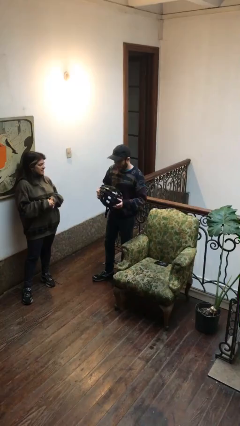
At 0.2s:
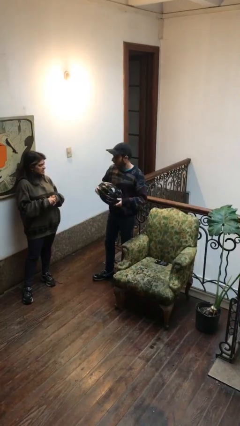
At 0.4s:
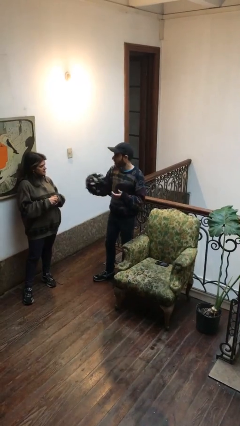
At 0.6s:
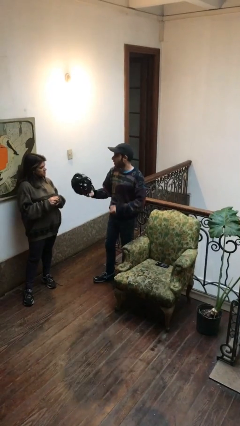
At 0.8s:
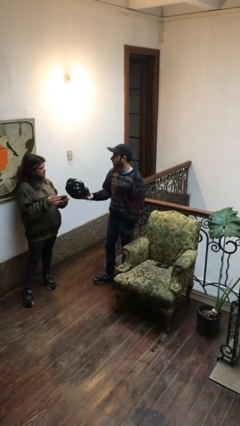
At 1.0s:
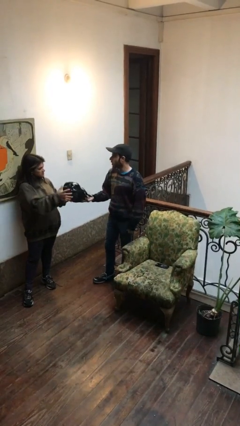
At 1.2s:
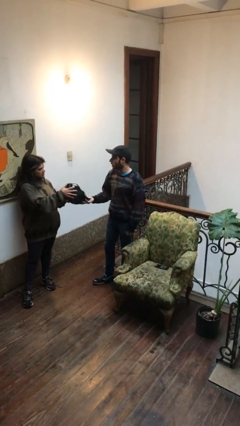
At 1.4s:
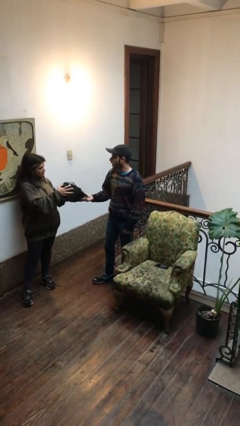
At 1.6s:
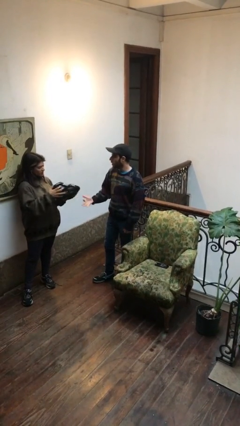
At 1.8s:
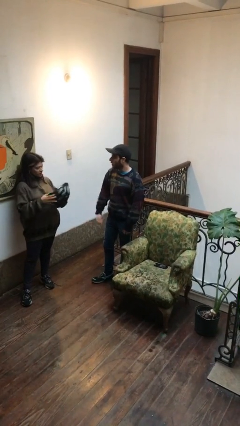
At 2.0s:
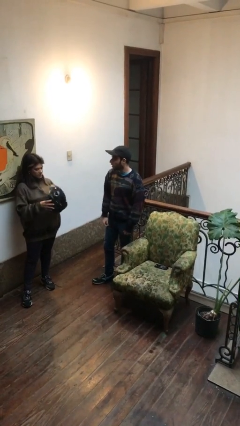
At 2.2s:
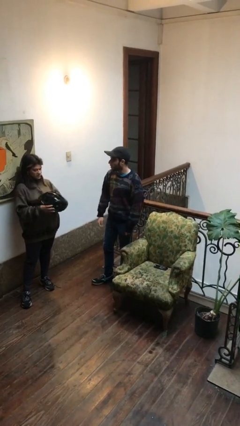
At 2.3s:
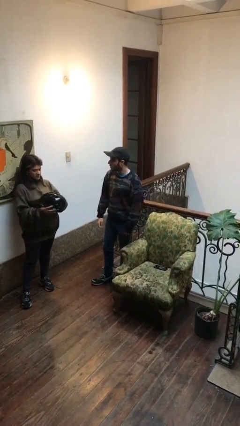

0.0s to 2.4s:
person transfers object to person

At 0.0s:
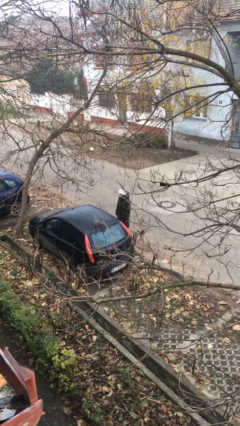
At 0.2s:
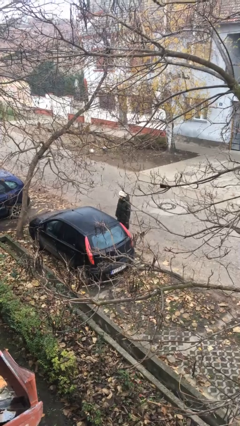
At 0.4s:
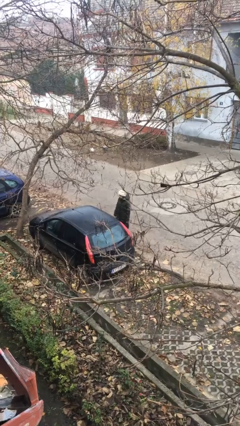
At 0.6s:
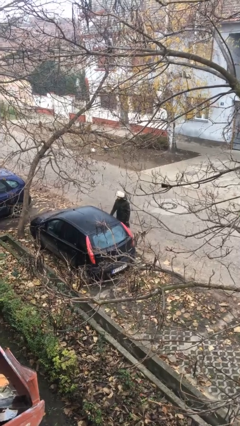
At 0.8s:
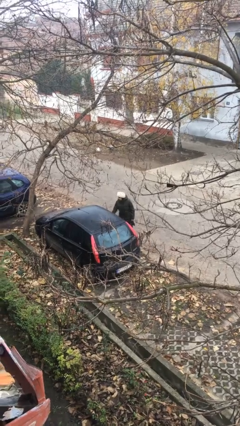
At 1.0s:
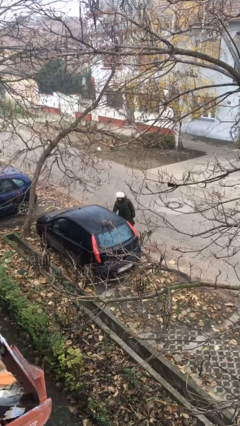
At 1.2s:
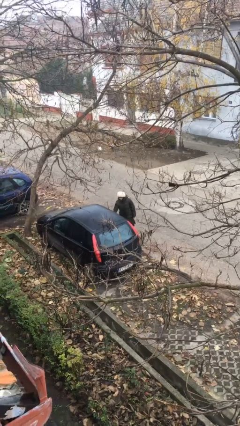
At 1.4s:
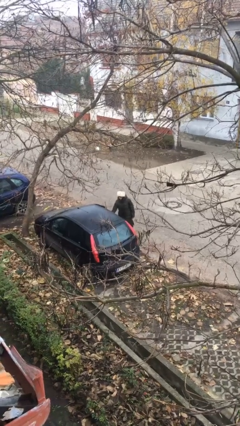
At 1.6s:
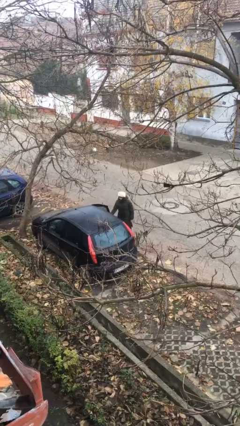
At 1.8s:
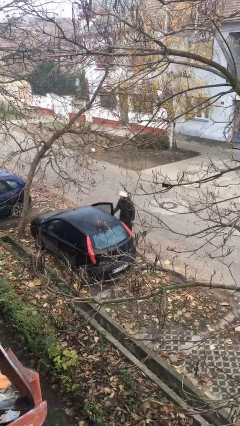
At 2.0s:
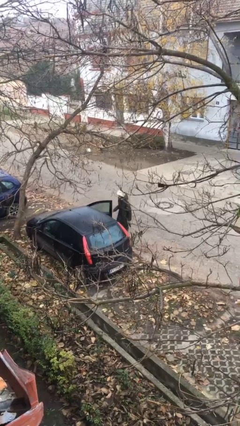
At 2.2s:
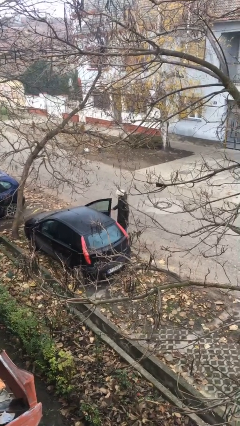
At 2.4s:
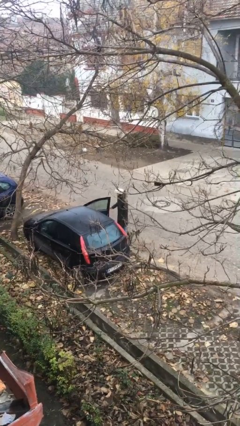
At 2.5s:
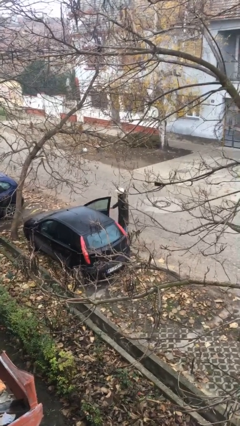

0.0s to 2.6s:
person opens car door

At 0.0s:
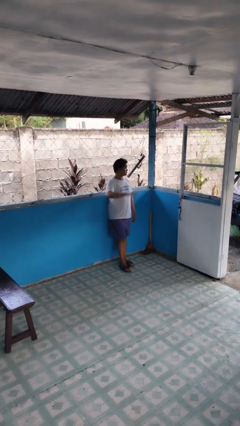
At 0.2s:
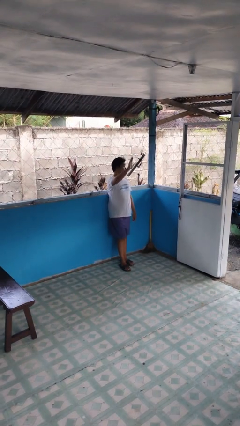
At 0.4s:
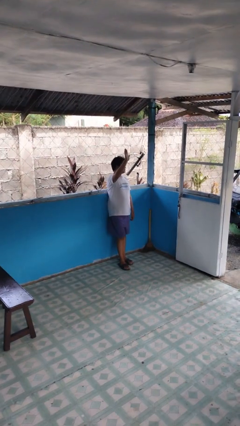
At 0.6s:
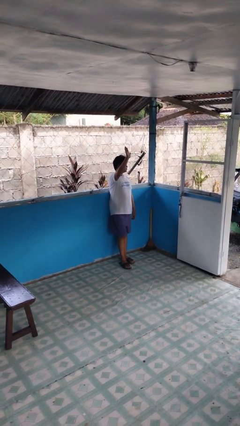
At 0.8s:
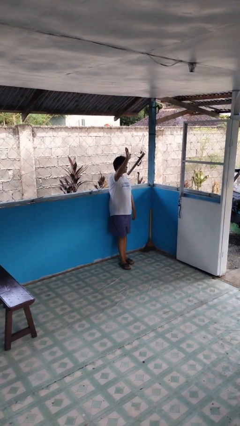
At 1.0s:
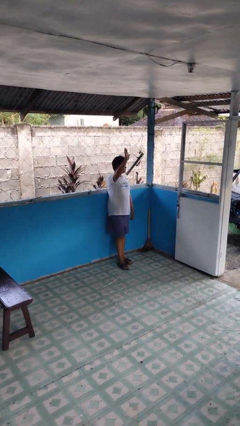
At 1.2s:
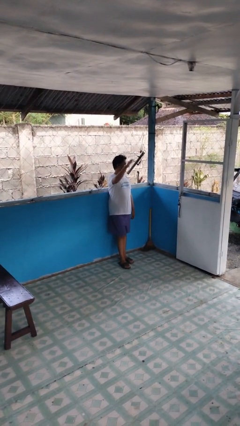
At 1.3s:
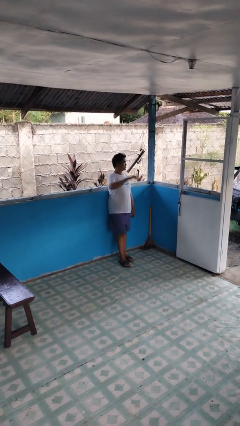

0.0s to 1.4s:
person gestures number five

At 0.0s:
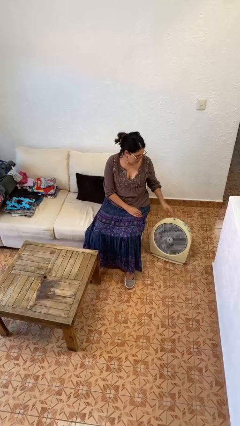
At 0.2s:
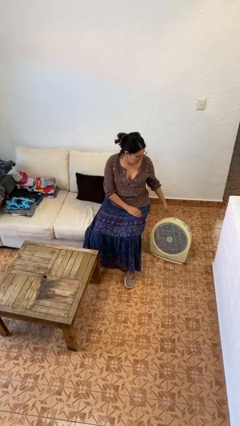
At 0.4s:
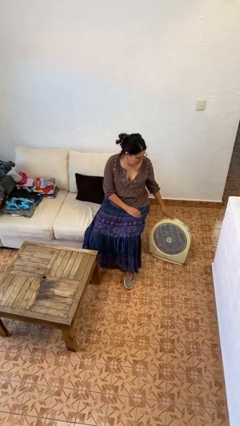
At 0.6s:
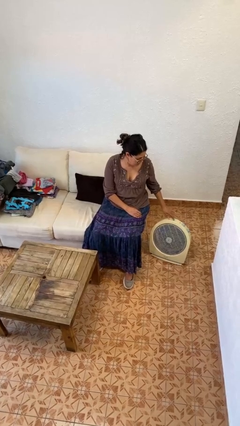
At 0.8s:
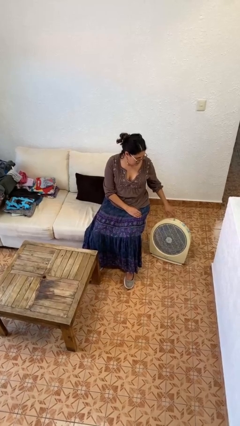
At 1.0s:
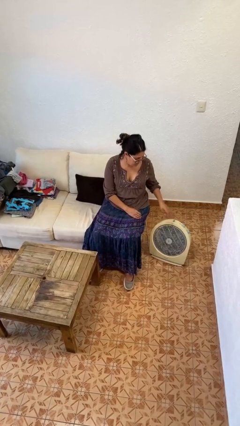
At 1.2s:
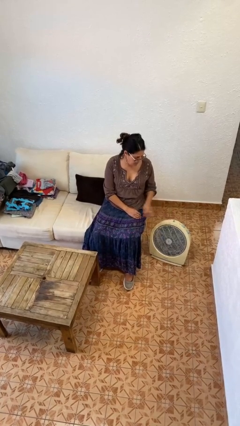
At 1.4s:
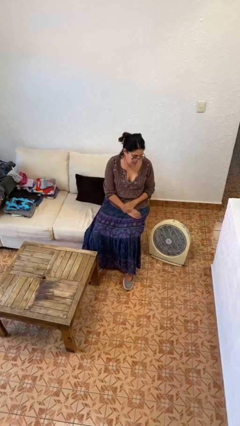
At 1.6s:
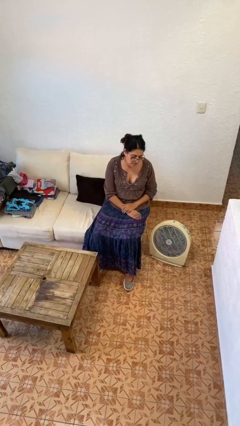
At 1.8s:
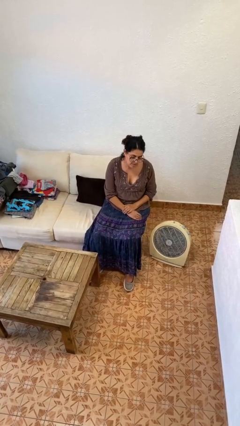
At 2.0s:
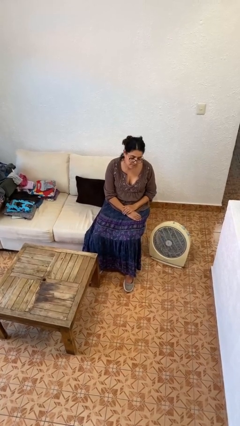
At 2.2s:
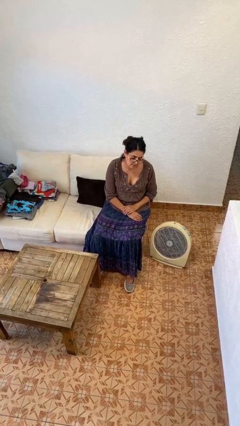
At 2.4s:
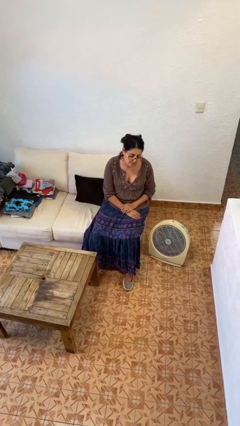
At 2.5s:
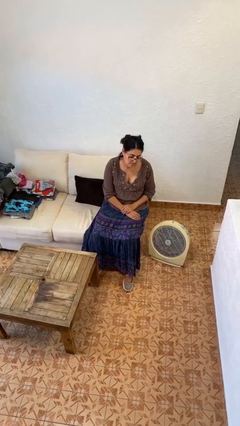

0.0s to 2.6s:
person turns off fan

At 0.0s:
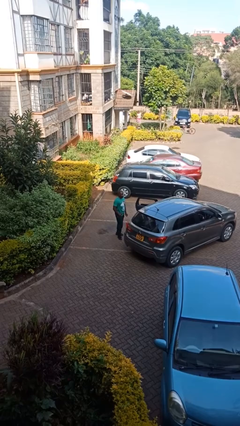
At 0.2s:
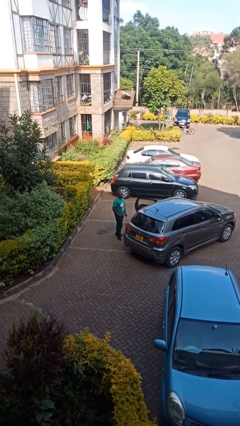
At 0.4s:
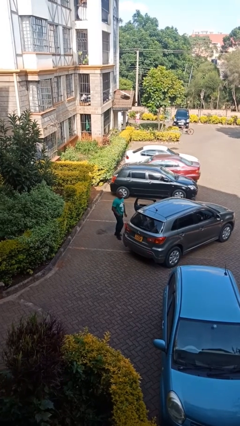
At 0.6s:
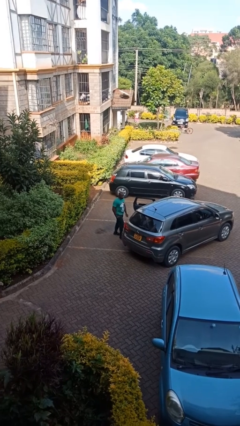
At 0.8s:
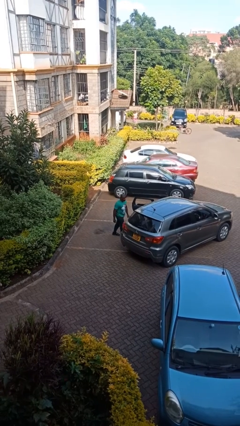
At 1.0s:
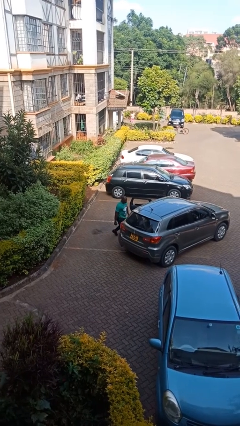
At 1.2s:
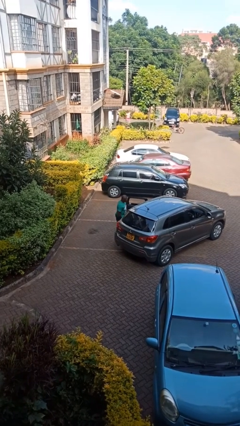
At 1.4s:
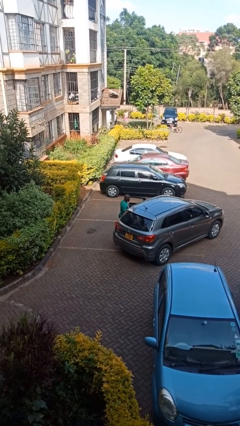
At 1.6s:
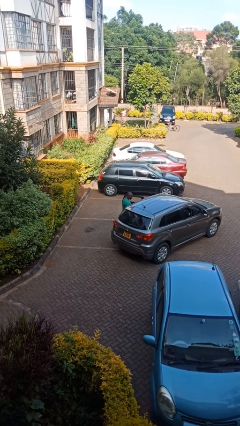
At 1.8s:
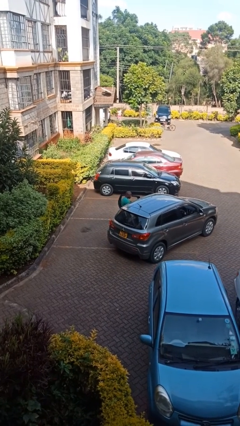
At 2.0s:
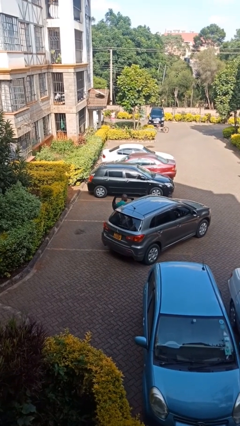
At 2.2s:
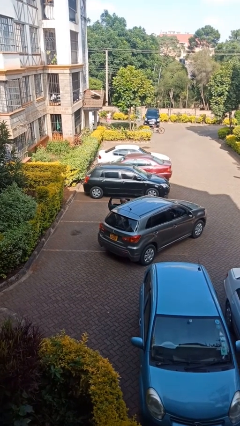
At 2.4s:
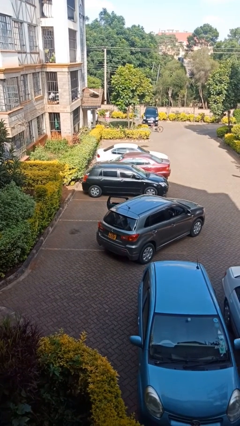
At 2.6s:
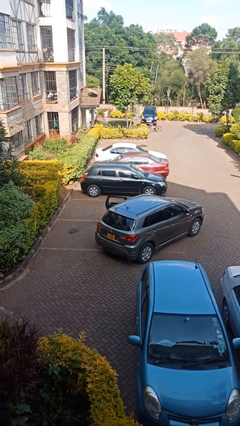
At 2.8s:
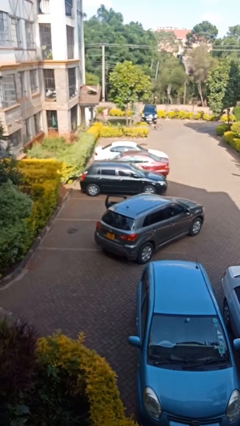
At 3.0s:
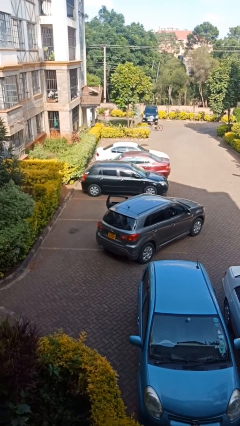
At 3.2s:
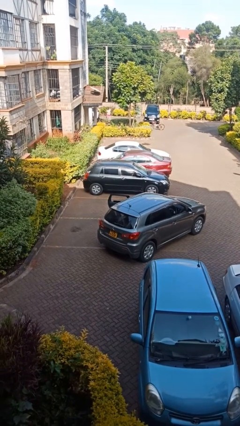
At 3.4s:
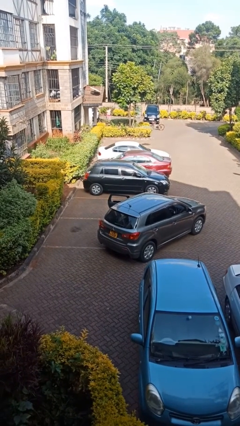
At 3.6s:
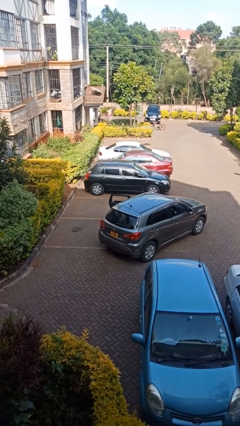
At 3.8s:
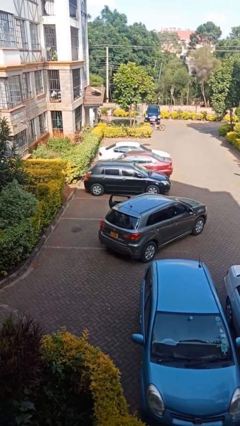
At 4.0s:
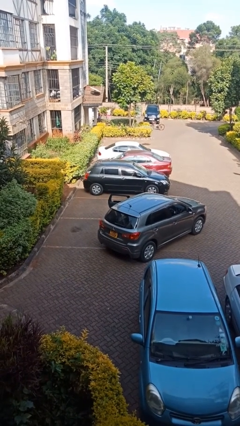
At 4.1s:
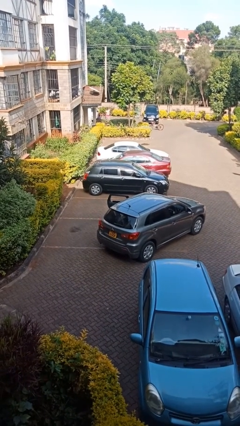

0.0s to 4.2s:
person enters car

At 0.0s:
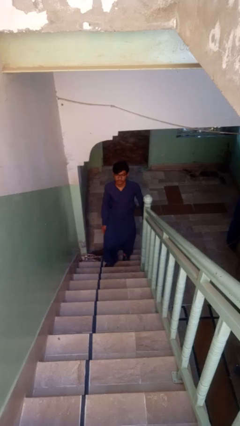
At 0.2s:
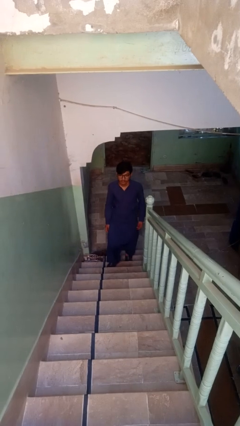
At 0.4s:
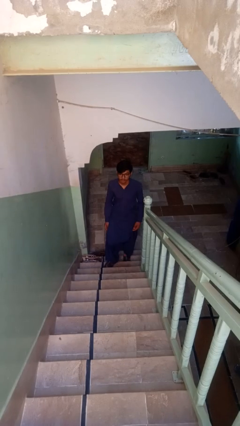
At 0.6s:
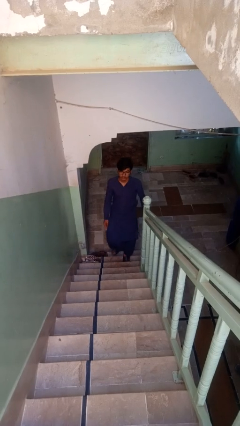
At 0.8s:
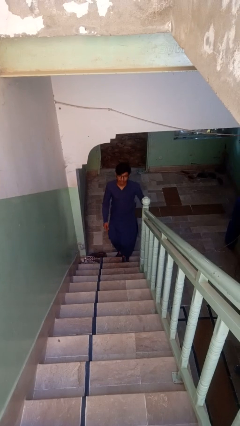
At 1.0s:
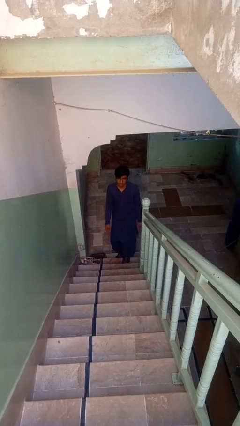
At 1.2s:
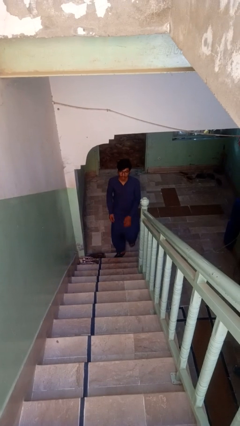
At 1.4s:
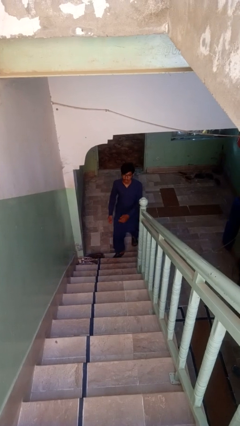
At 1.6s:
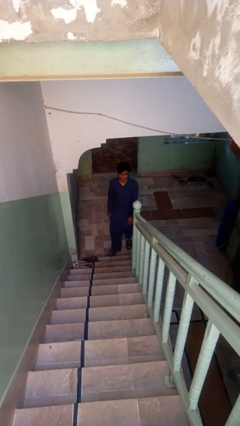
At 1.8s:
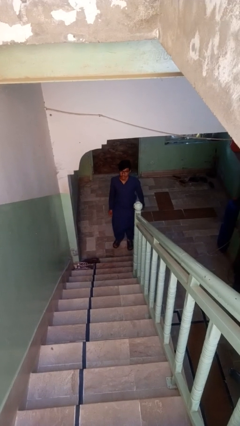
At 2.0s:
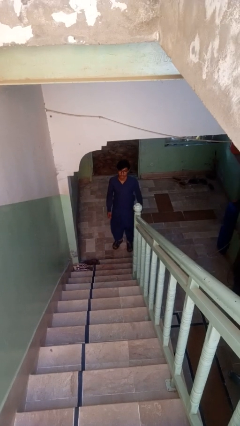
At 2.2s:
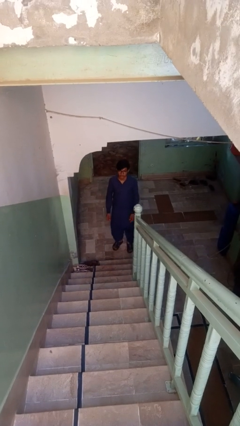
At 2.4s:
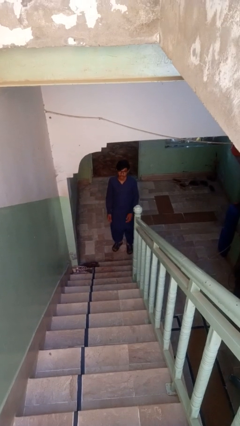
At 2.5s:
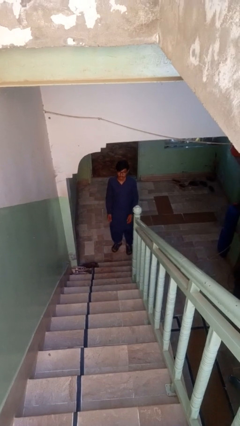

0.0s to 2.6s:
person climbs down stairs

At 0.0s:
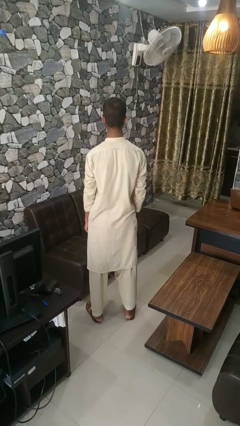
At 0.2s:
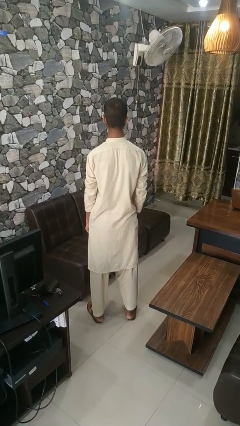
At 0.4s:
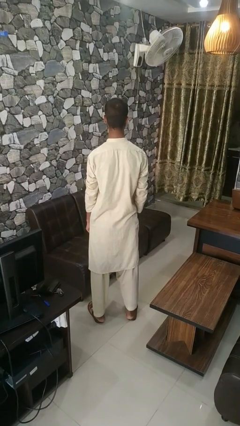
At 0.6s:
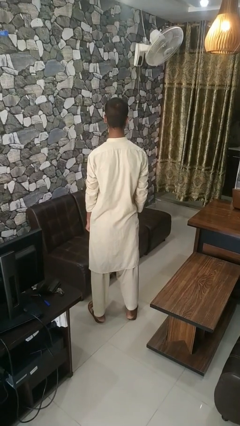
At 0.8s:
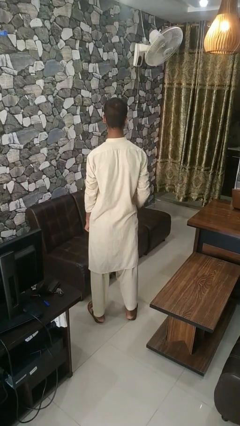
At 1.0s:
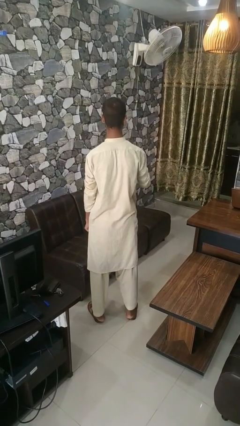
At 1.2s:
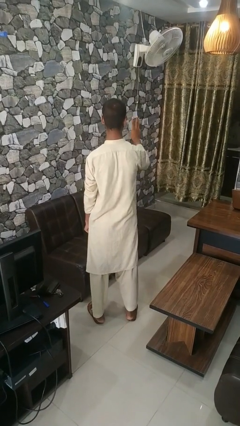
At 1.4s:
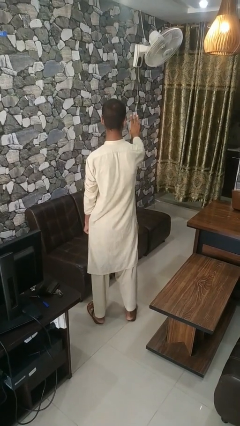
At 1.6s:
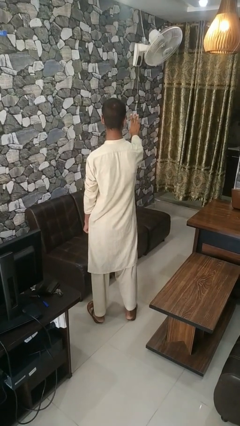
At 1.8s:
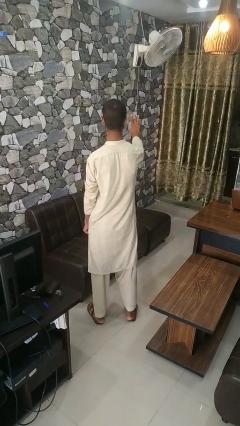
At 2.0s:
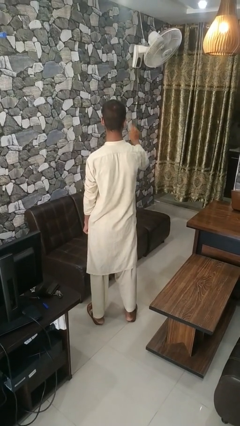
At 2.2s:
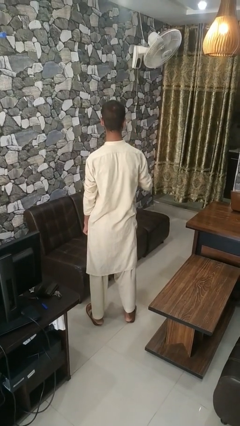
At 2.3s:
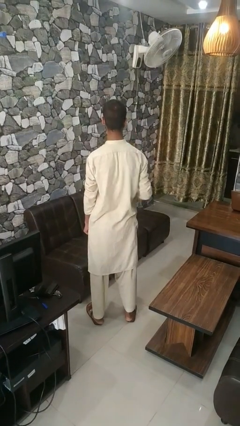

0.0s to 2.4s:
person gestures number three
